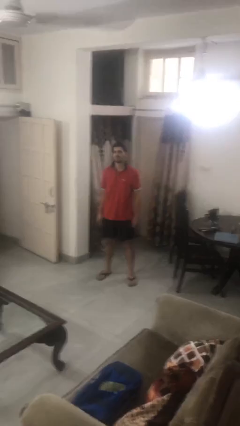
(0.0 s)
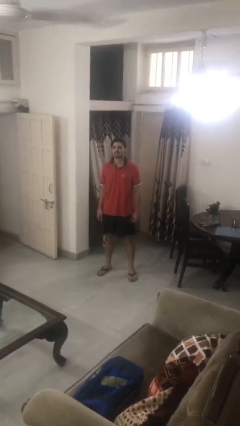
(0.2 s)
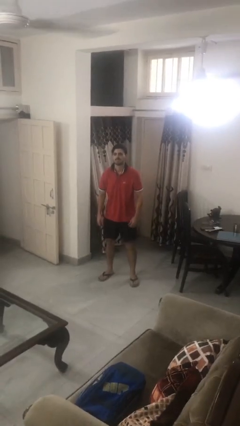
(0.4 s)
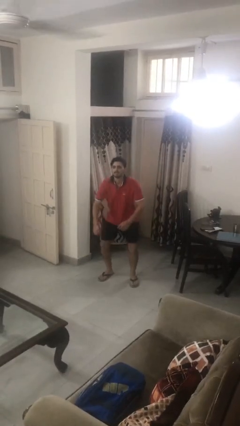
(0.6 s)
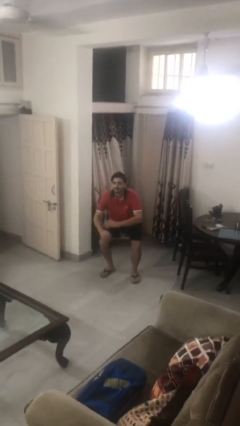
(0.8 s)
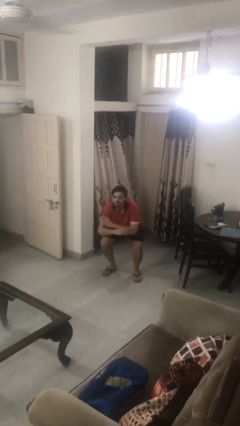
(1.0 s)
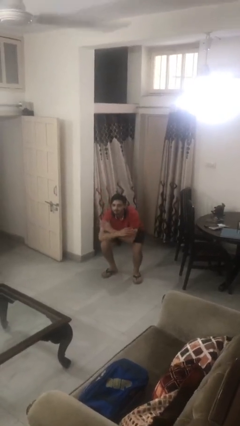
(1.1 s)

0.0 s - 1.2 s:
person squats

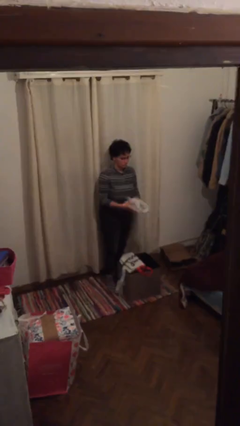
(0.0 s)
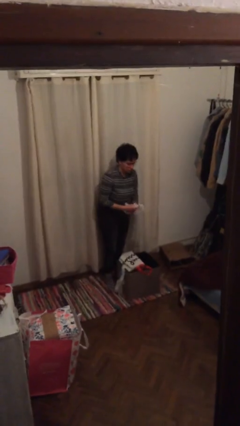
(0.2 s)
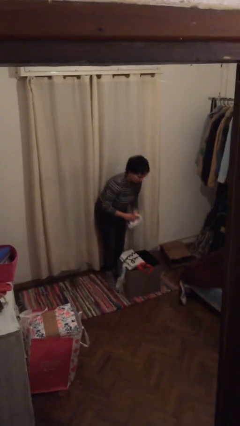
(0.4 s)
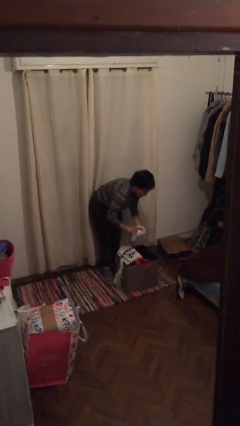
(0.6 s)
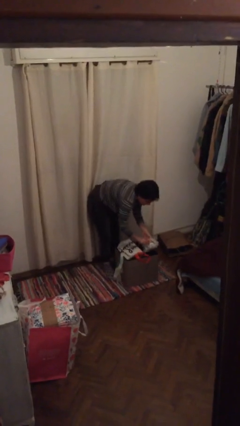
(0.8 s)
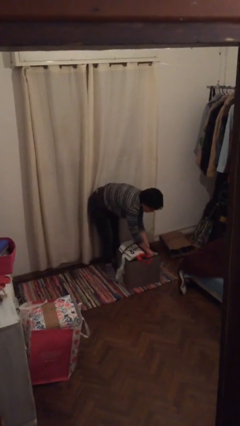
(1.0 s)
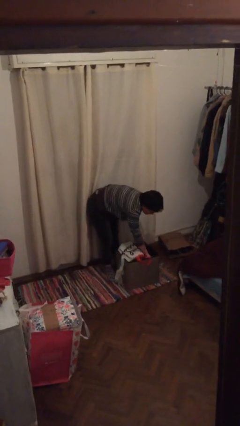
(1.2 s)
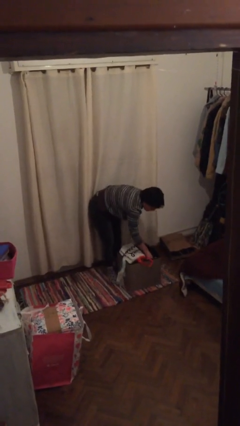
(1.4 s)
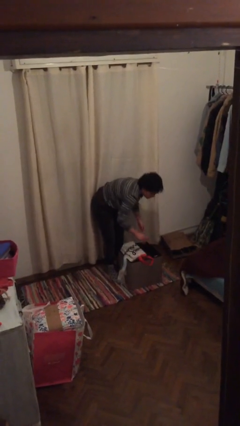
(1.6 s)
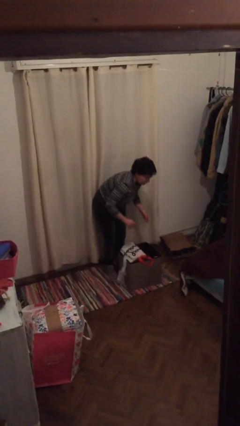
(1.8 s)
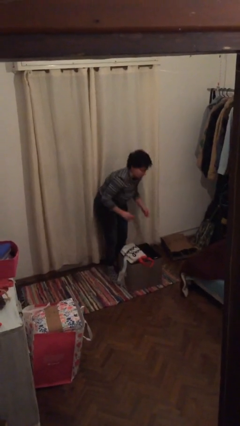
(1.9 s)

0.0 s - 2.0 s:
person puts object into basket

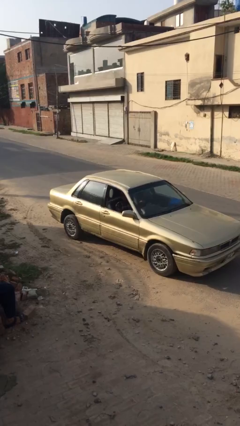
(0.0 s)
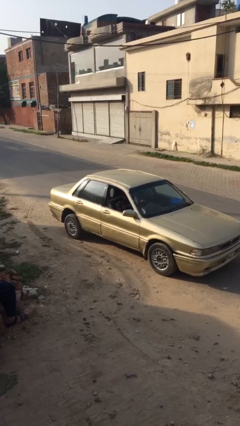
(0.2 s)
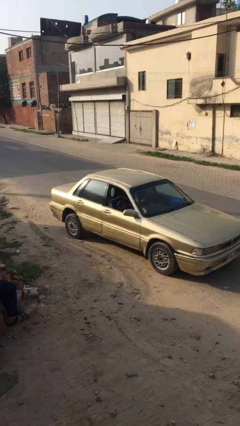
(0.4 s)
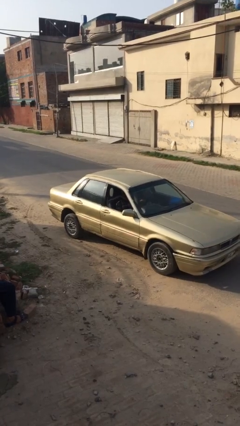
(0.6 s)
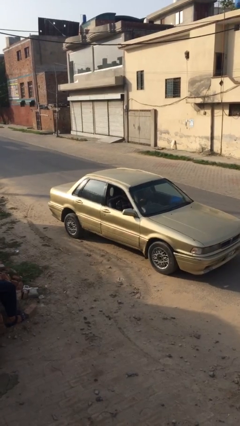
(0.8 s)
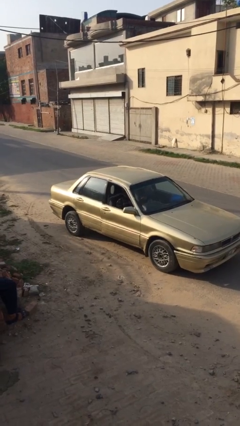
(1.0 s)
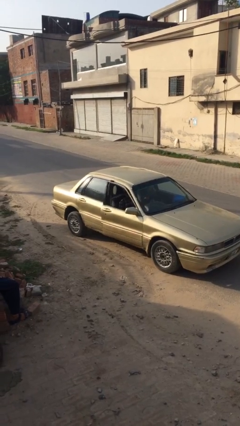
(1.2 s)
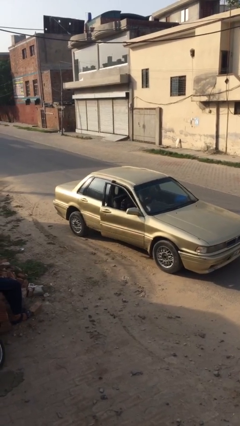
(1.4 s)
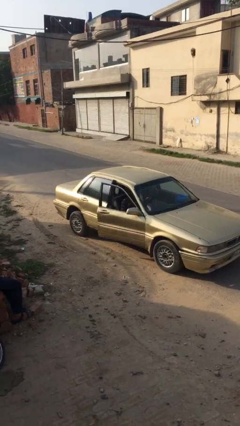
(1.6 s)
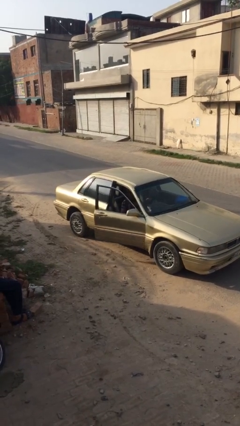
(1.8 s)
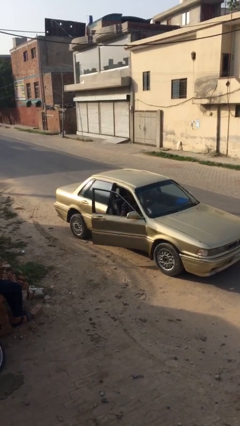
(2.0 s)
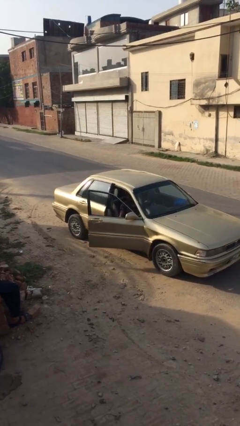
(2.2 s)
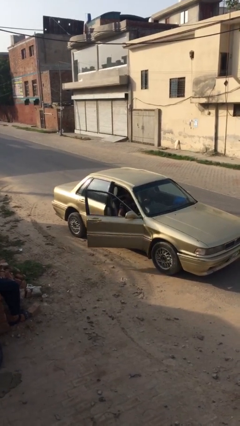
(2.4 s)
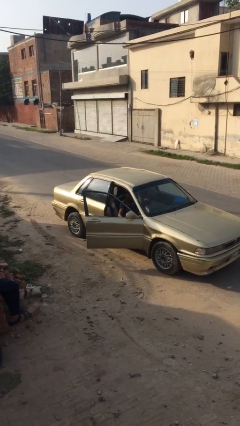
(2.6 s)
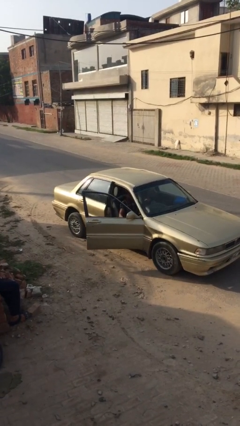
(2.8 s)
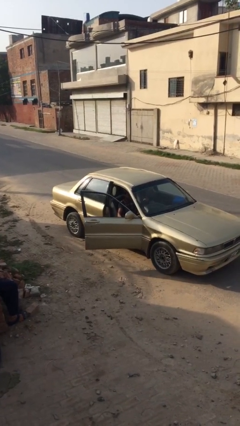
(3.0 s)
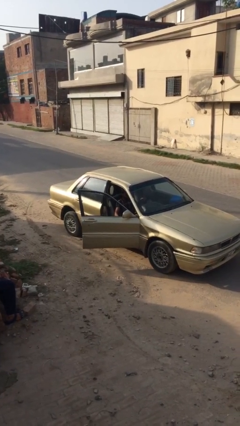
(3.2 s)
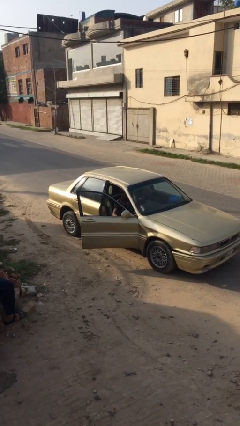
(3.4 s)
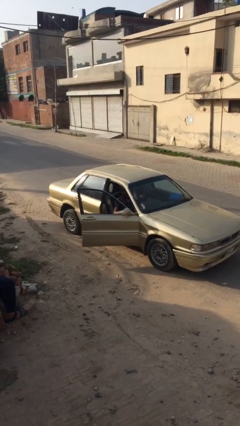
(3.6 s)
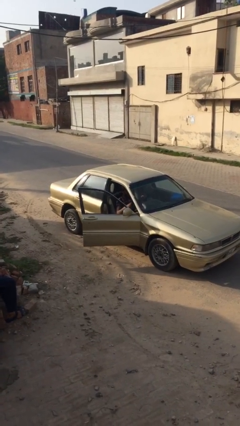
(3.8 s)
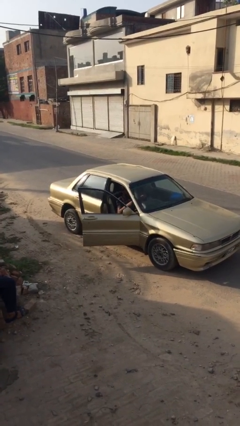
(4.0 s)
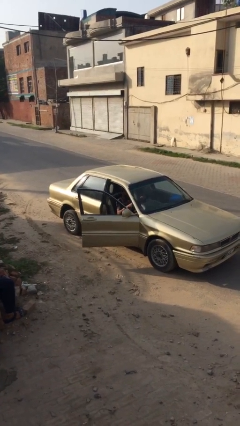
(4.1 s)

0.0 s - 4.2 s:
person opens car door

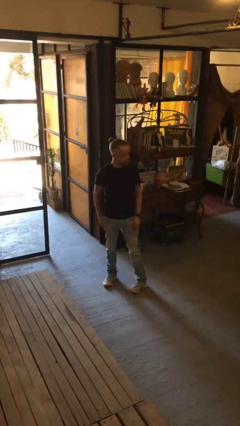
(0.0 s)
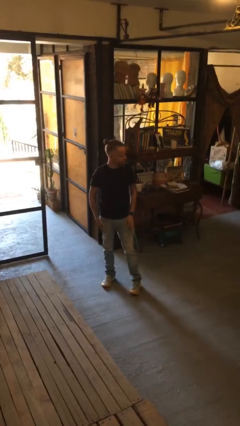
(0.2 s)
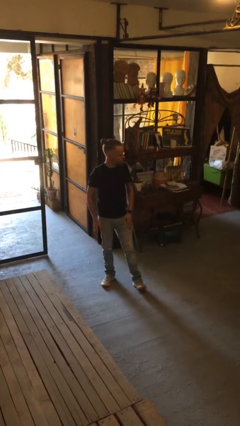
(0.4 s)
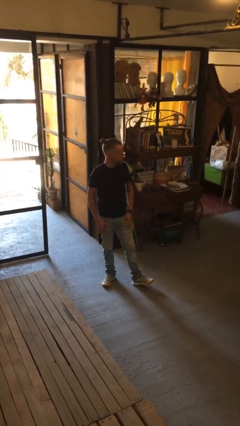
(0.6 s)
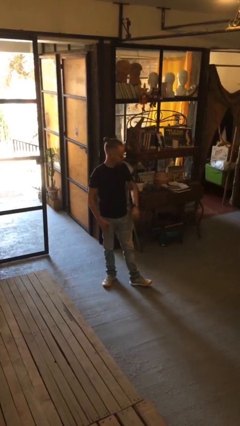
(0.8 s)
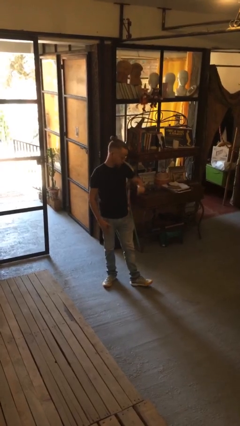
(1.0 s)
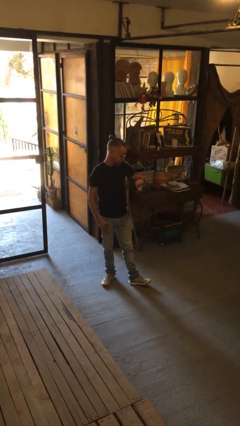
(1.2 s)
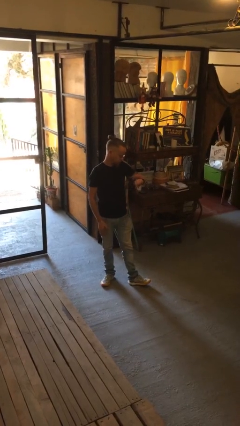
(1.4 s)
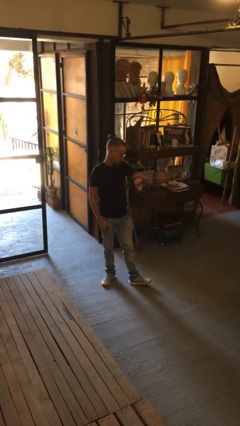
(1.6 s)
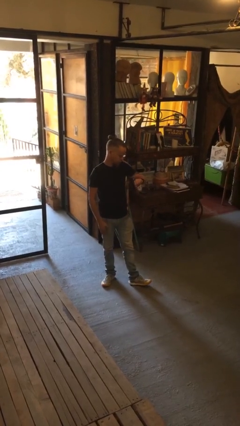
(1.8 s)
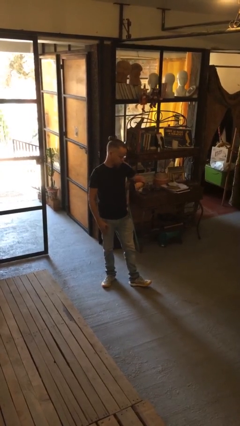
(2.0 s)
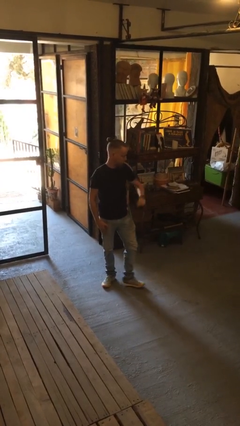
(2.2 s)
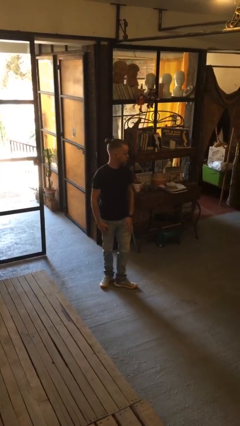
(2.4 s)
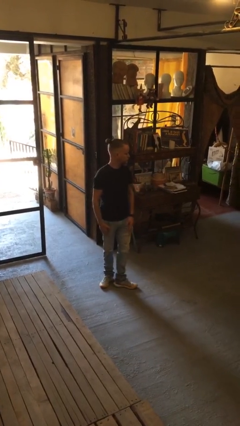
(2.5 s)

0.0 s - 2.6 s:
person looks at wristwatch

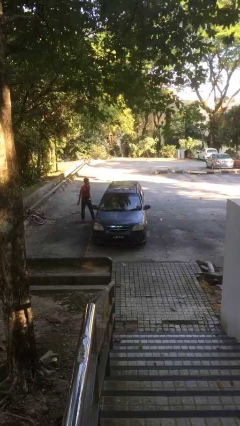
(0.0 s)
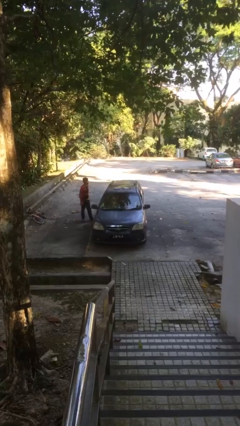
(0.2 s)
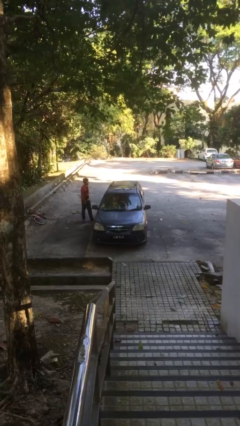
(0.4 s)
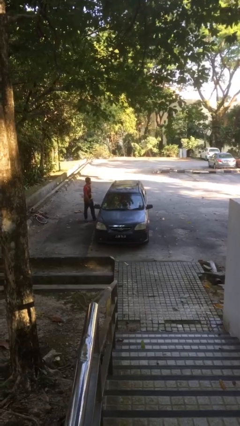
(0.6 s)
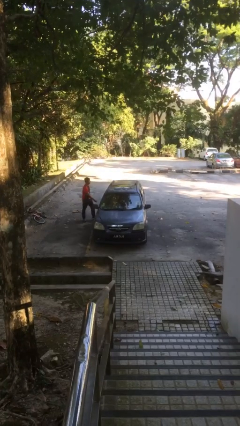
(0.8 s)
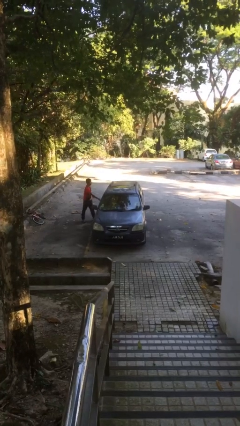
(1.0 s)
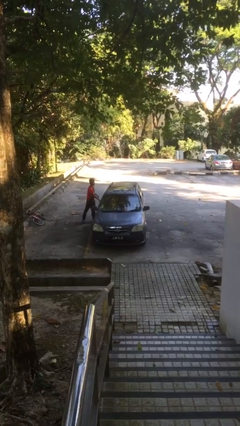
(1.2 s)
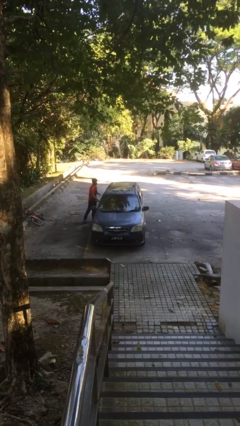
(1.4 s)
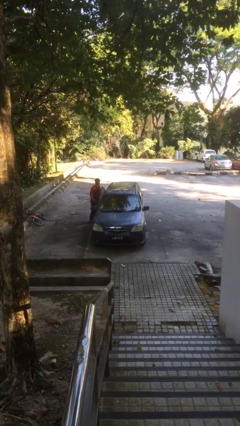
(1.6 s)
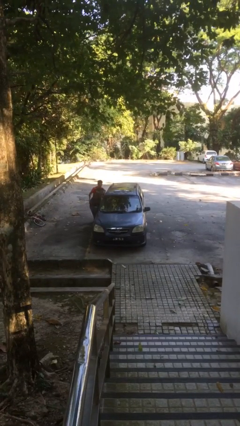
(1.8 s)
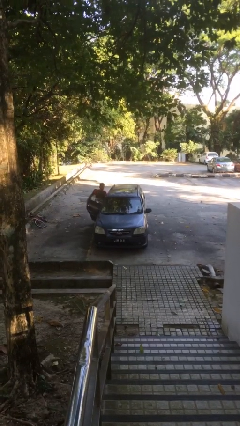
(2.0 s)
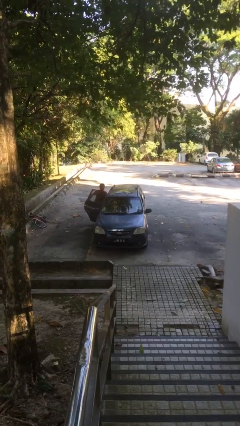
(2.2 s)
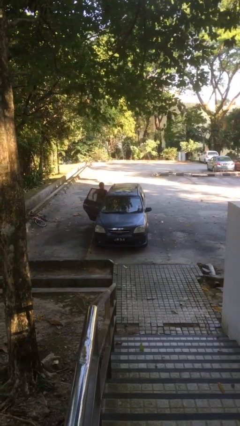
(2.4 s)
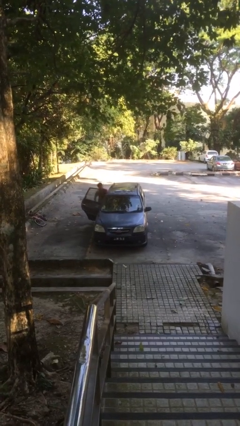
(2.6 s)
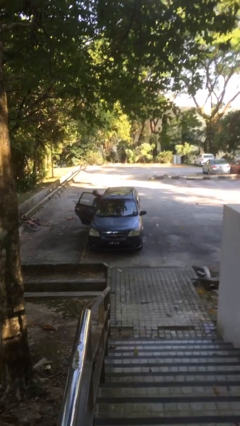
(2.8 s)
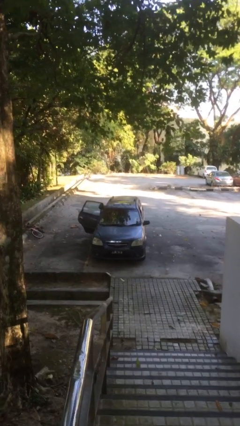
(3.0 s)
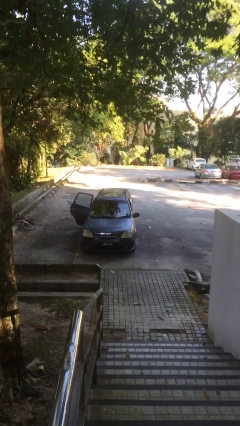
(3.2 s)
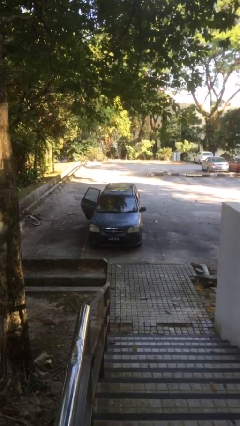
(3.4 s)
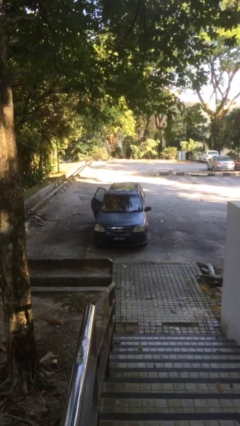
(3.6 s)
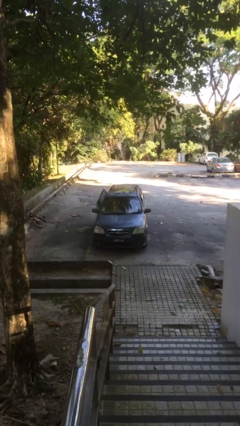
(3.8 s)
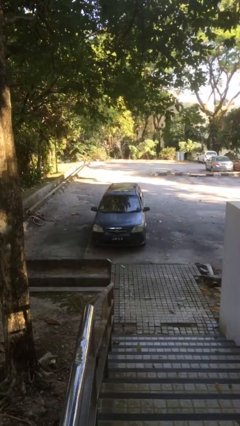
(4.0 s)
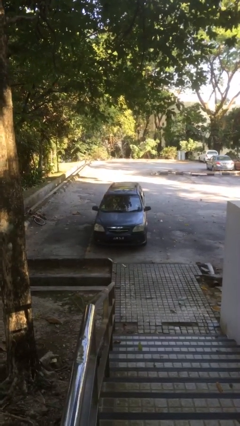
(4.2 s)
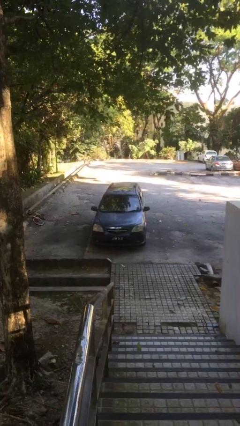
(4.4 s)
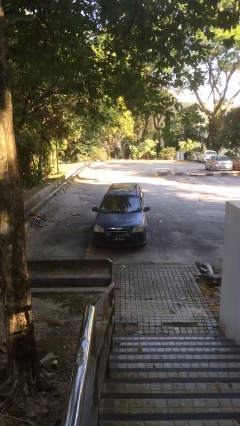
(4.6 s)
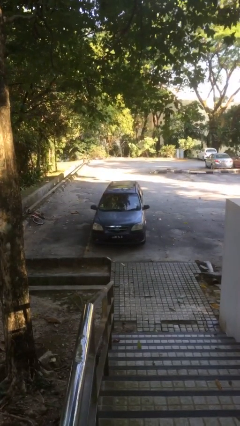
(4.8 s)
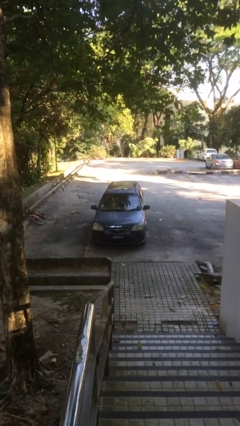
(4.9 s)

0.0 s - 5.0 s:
car picks up person

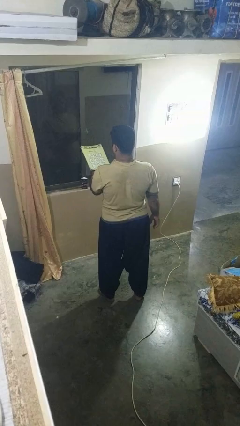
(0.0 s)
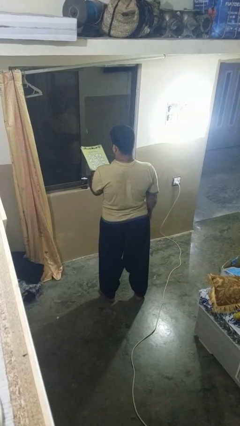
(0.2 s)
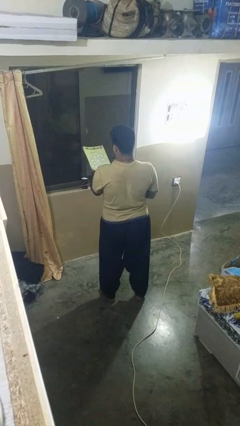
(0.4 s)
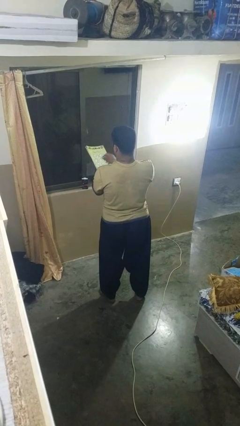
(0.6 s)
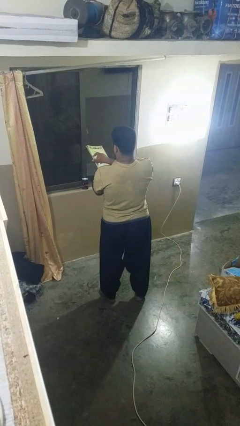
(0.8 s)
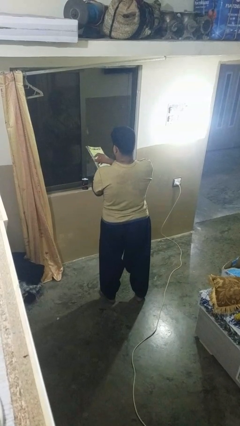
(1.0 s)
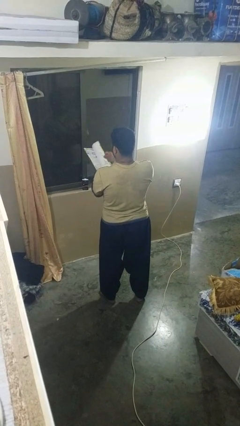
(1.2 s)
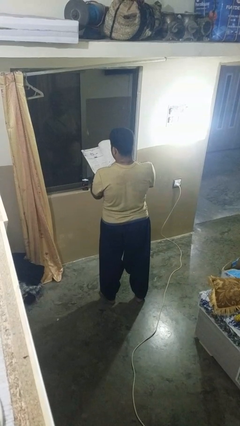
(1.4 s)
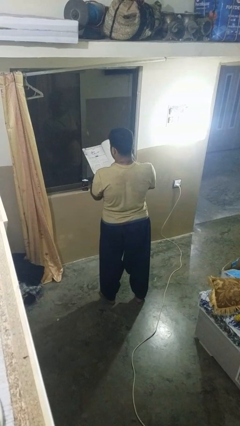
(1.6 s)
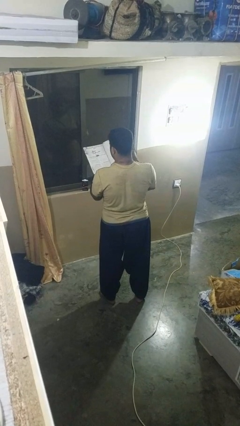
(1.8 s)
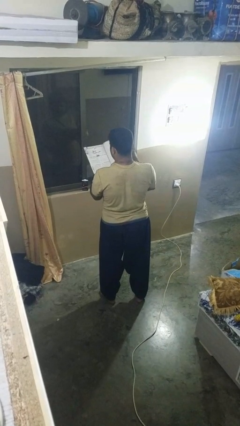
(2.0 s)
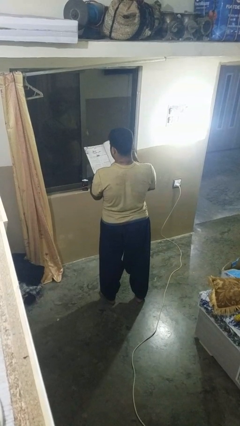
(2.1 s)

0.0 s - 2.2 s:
person reads magazine

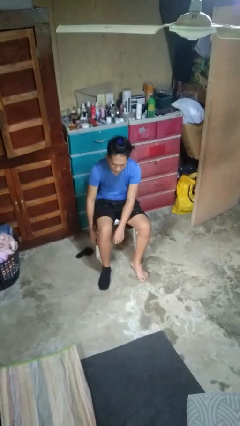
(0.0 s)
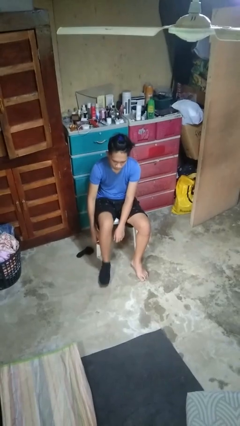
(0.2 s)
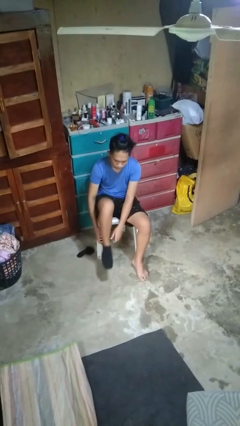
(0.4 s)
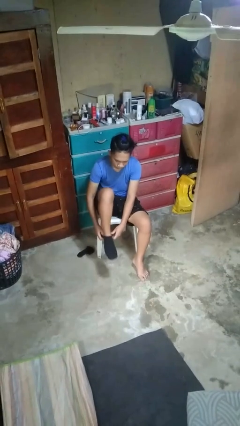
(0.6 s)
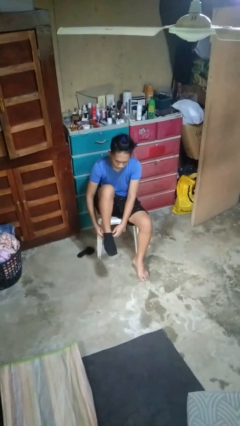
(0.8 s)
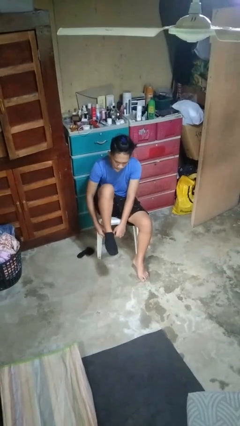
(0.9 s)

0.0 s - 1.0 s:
person takes off socks
